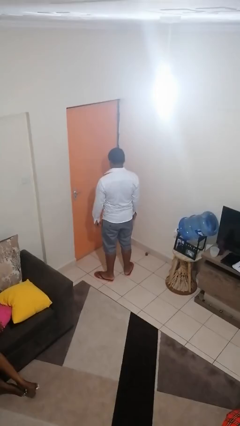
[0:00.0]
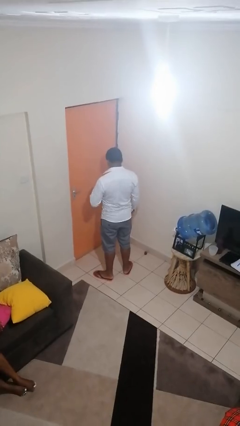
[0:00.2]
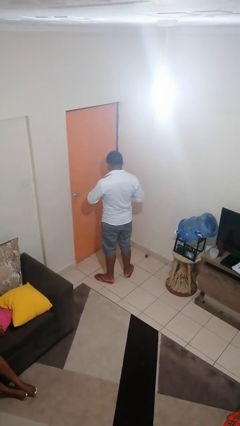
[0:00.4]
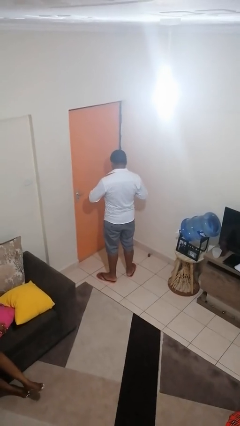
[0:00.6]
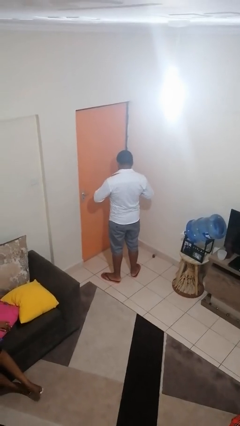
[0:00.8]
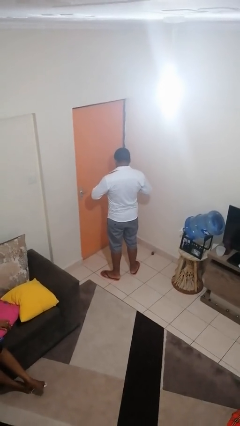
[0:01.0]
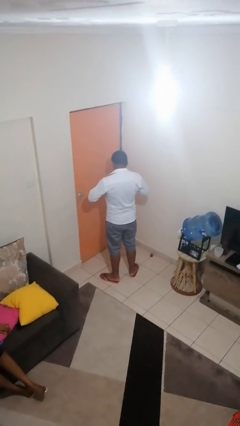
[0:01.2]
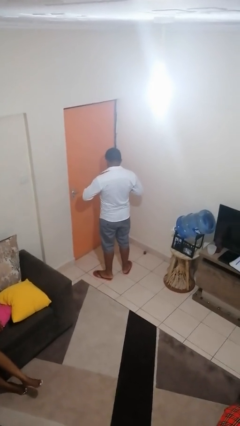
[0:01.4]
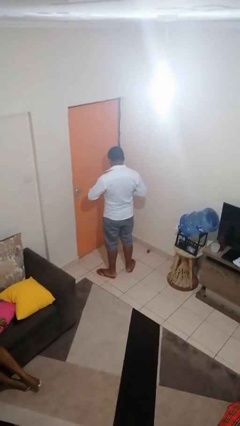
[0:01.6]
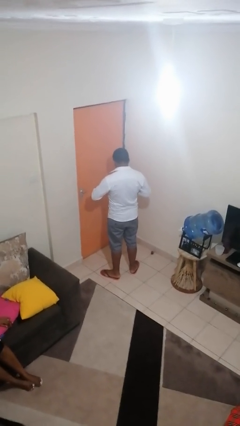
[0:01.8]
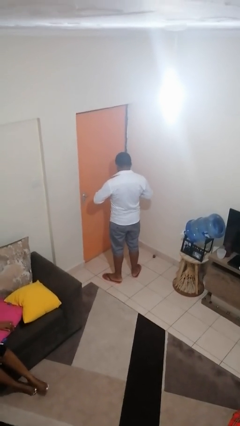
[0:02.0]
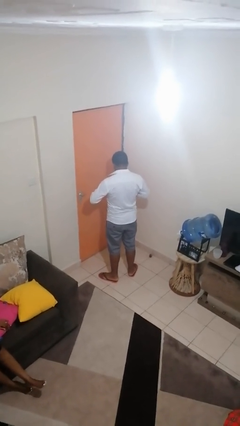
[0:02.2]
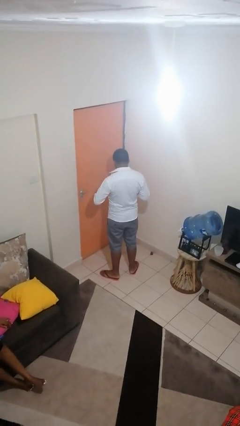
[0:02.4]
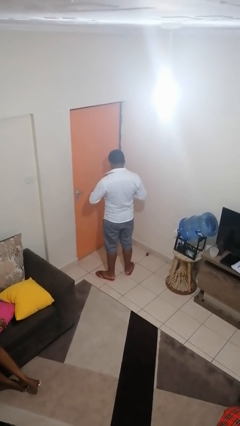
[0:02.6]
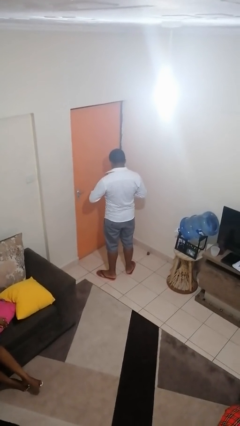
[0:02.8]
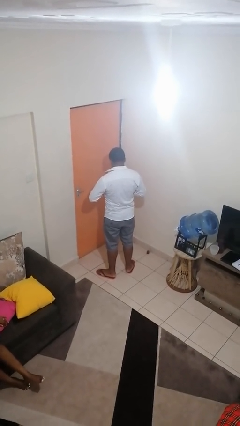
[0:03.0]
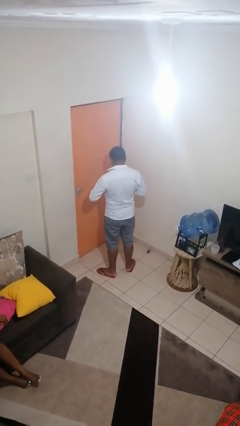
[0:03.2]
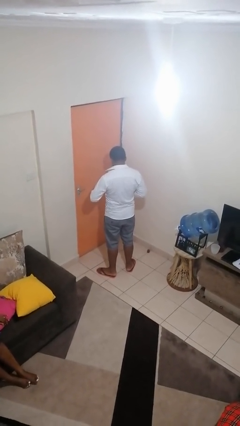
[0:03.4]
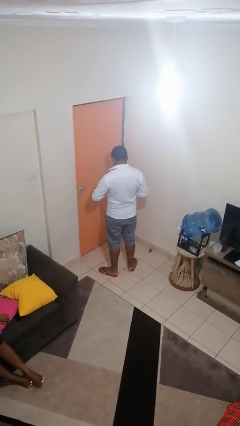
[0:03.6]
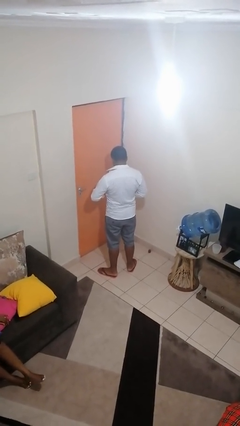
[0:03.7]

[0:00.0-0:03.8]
person unbuttons shirt

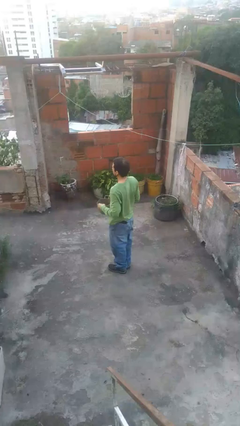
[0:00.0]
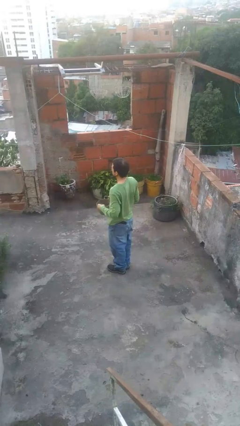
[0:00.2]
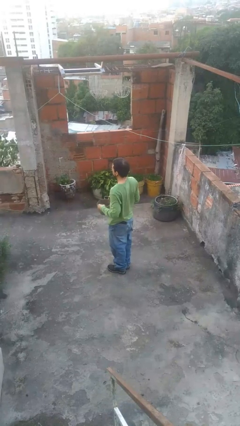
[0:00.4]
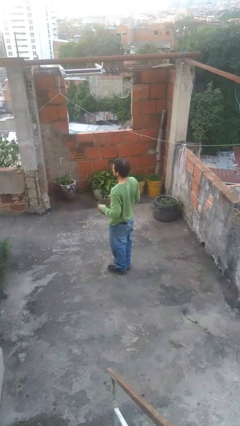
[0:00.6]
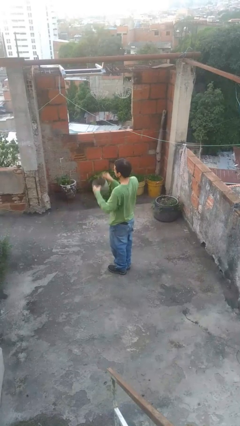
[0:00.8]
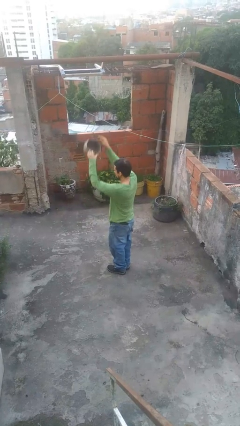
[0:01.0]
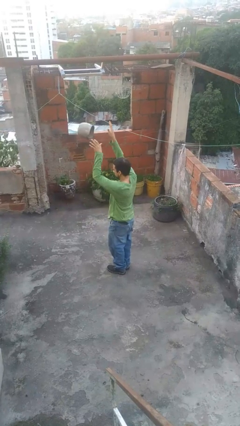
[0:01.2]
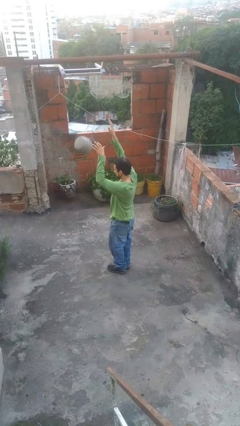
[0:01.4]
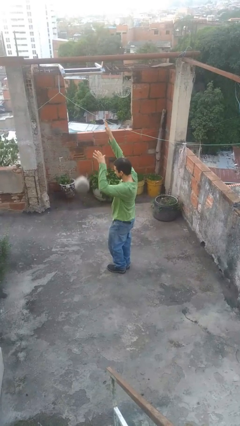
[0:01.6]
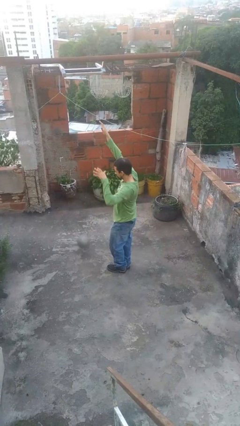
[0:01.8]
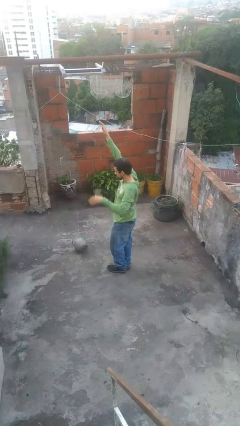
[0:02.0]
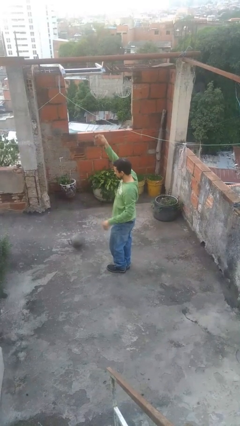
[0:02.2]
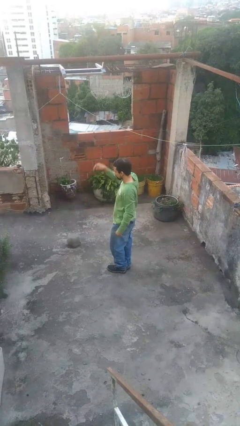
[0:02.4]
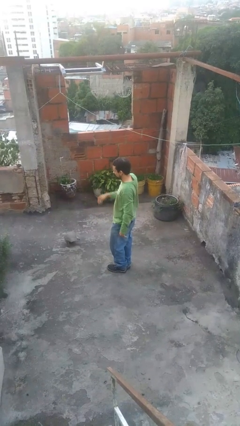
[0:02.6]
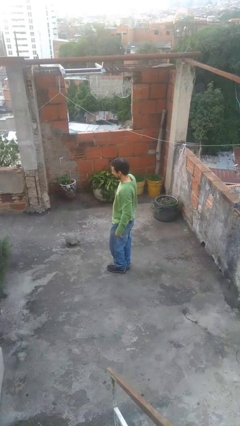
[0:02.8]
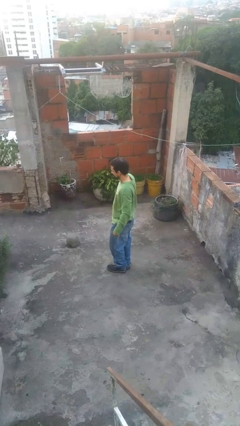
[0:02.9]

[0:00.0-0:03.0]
person throws object into air

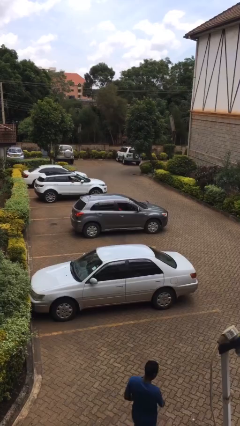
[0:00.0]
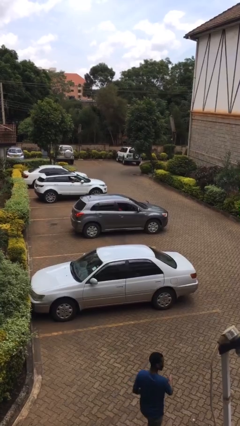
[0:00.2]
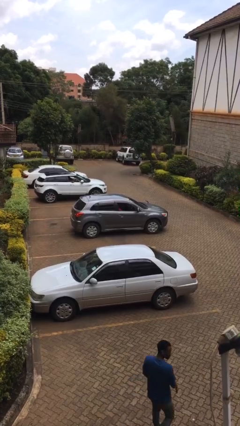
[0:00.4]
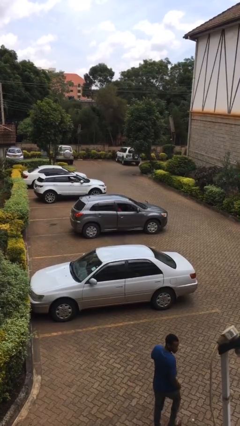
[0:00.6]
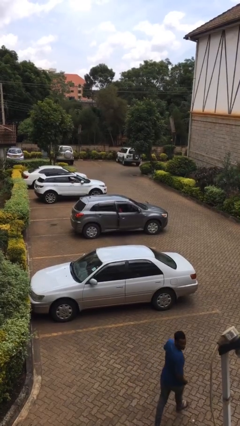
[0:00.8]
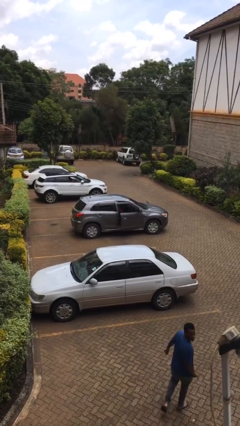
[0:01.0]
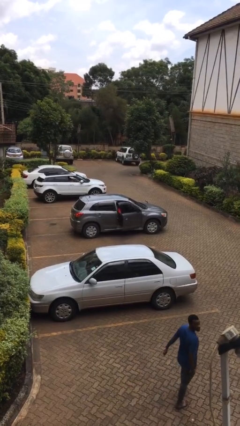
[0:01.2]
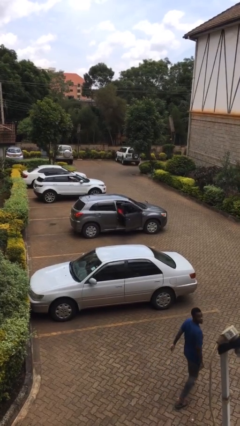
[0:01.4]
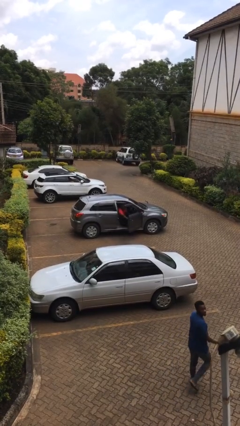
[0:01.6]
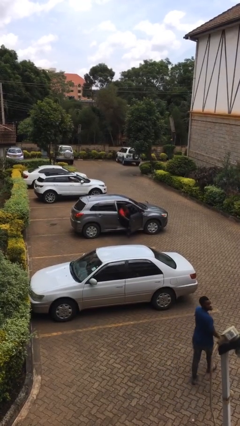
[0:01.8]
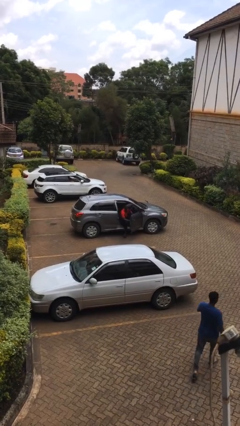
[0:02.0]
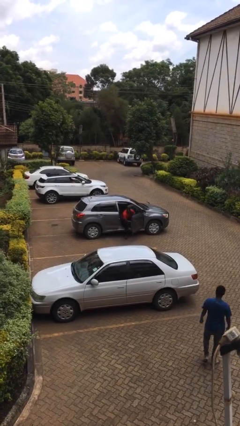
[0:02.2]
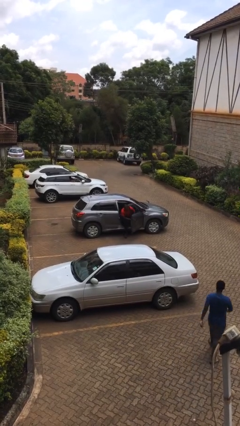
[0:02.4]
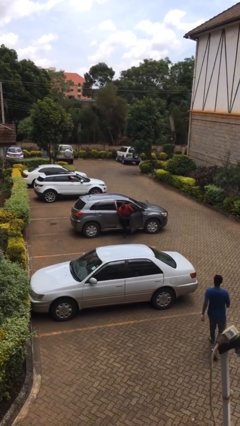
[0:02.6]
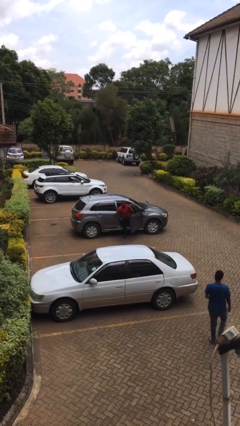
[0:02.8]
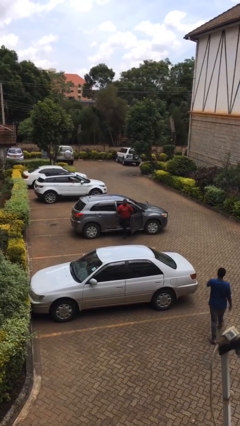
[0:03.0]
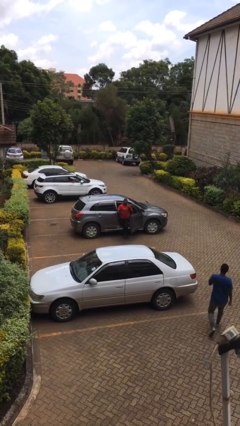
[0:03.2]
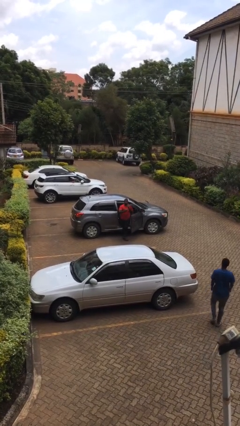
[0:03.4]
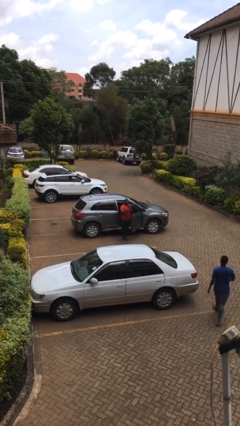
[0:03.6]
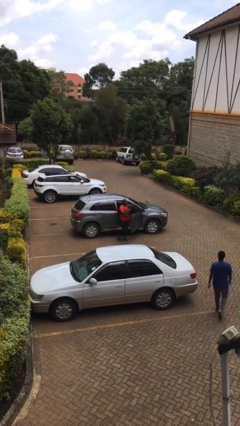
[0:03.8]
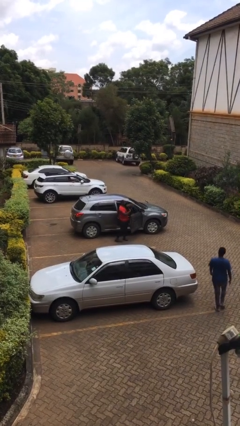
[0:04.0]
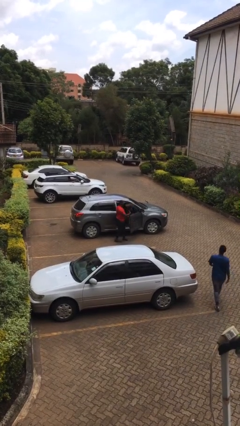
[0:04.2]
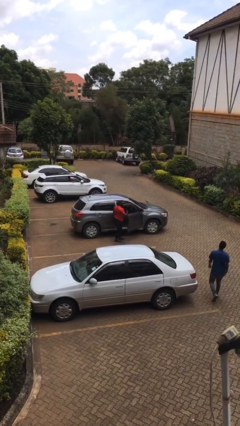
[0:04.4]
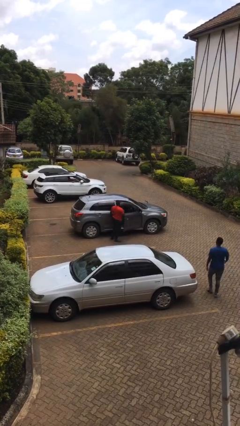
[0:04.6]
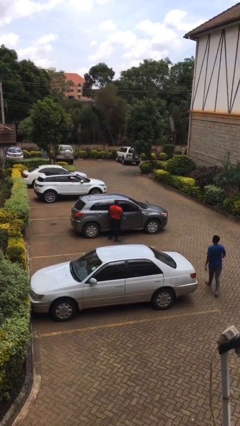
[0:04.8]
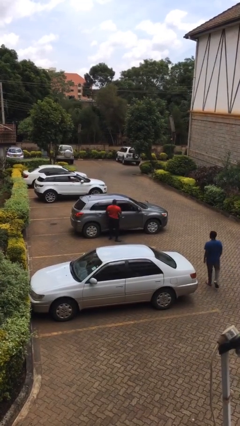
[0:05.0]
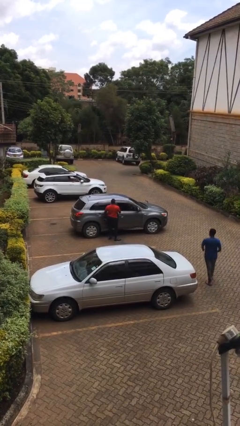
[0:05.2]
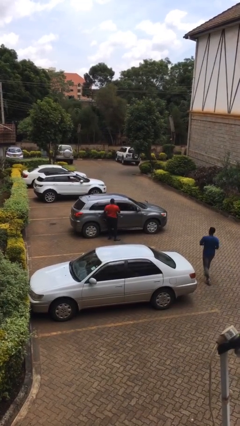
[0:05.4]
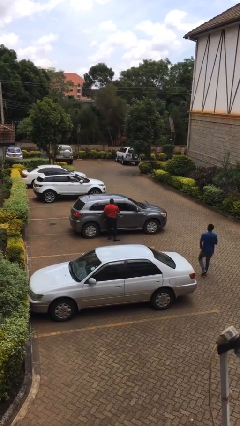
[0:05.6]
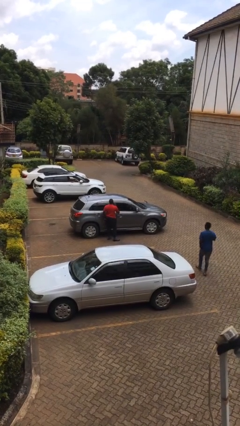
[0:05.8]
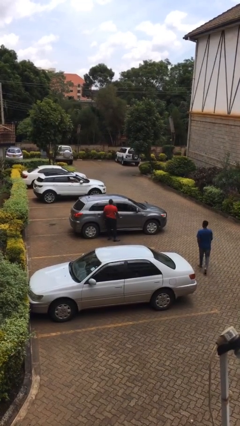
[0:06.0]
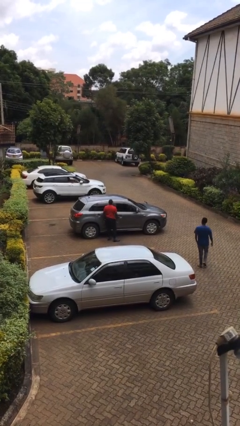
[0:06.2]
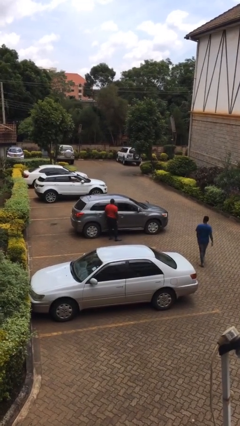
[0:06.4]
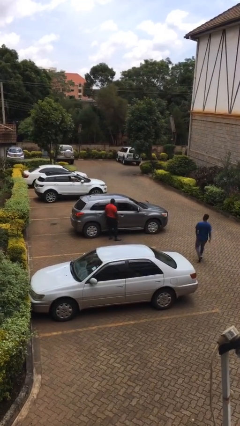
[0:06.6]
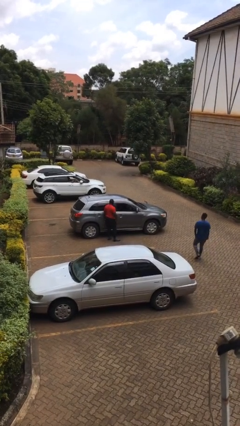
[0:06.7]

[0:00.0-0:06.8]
car drops off person

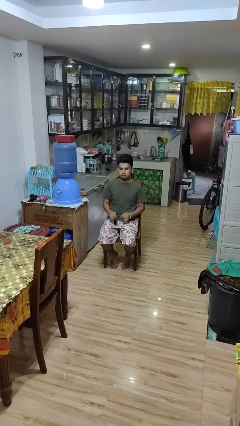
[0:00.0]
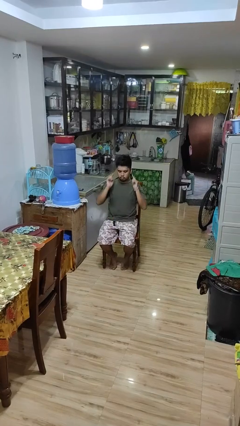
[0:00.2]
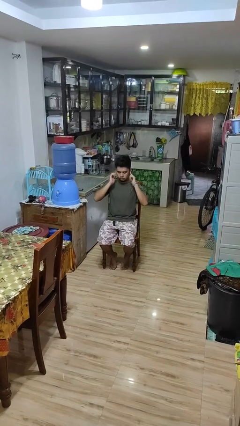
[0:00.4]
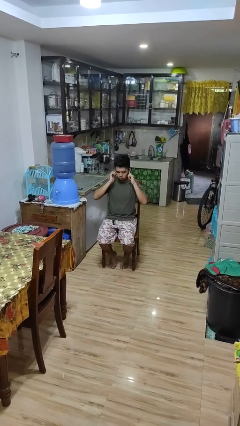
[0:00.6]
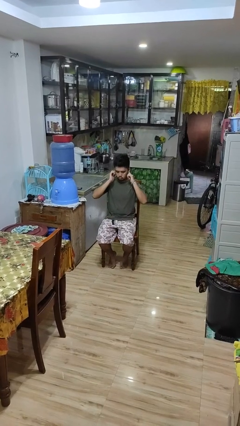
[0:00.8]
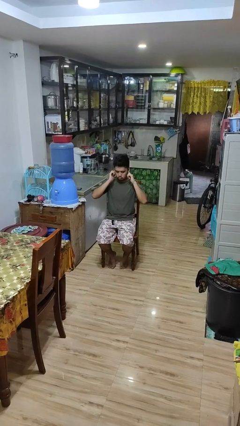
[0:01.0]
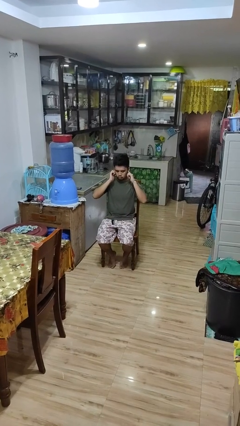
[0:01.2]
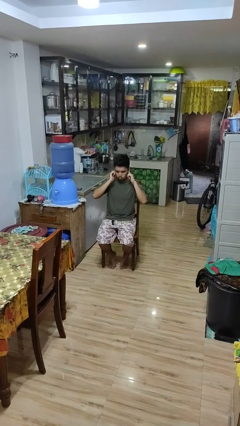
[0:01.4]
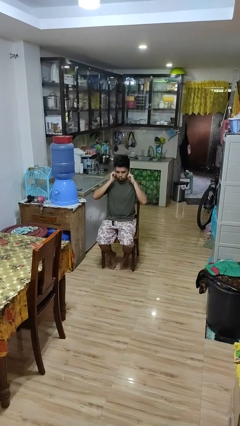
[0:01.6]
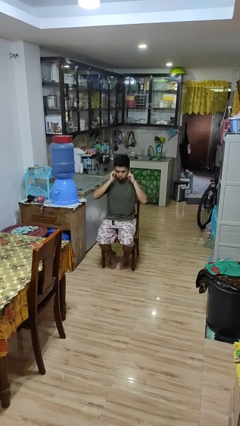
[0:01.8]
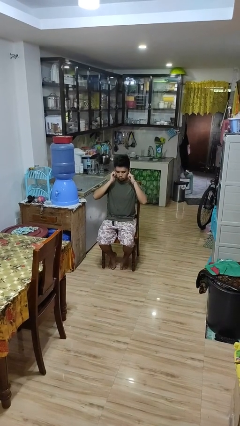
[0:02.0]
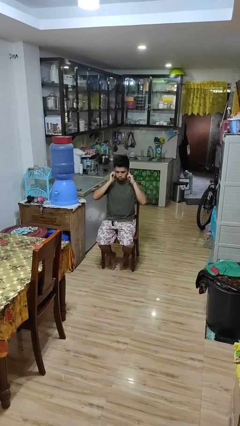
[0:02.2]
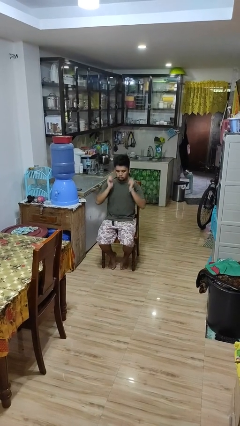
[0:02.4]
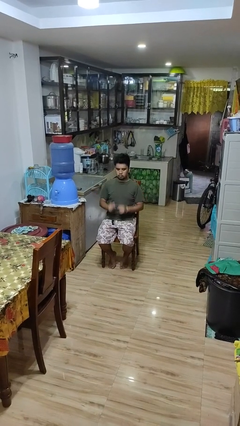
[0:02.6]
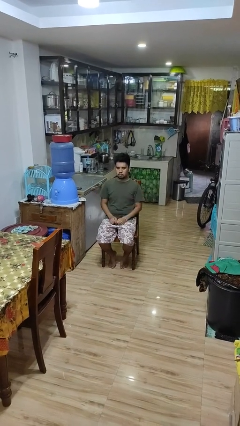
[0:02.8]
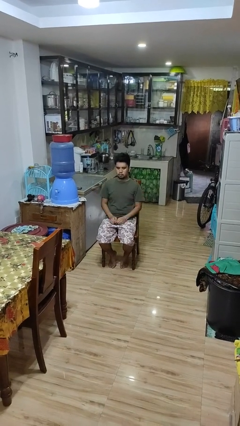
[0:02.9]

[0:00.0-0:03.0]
person puts fingers in ear

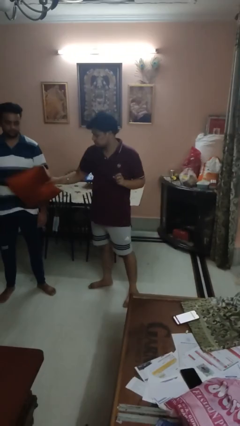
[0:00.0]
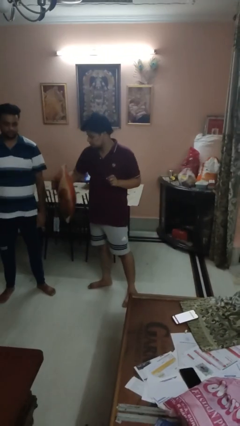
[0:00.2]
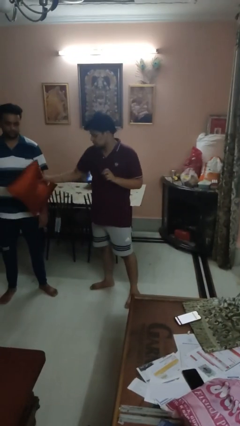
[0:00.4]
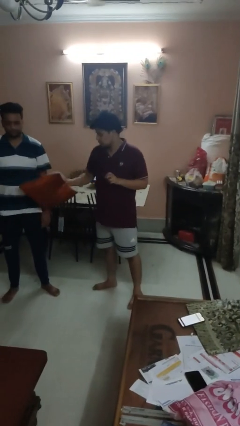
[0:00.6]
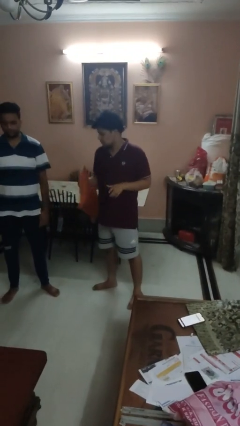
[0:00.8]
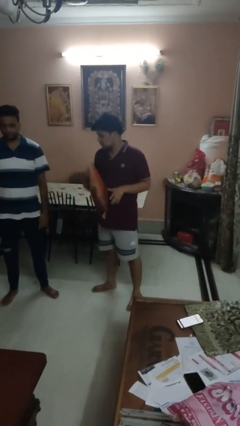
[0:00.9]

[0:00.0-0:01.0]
person hits person with pillow

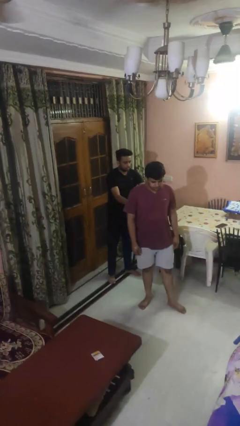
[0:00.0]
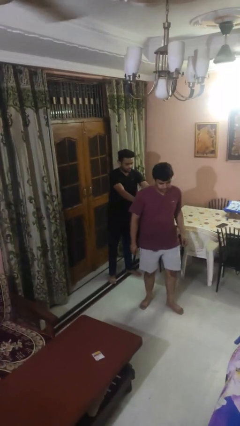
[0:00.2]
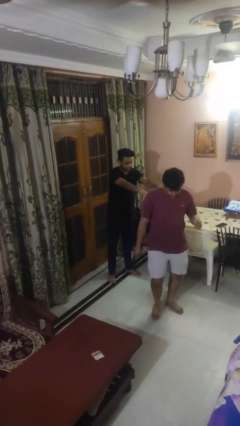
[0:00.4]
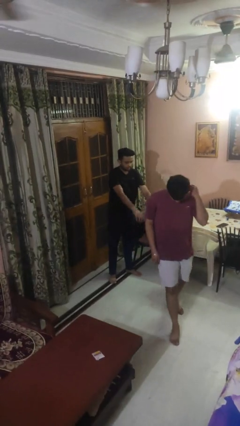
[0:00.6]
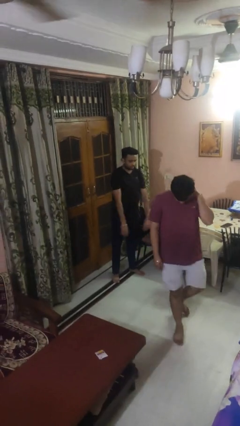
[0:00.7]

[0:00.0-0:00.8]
person shoves person
